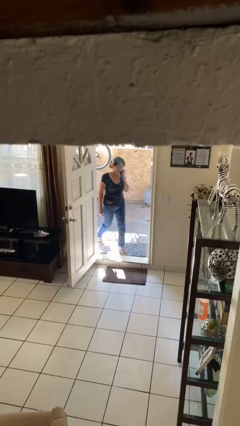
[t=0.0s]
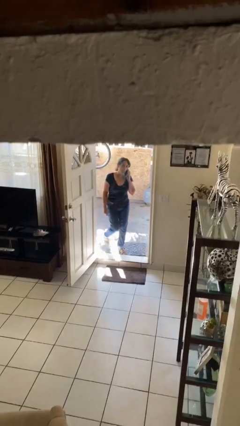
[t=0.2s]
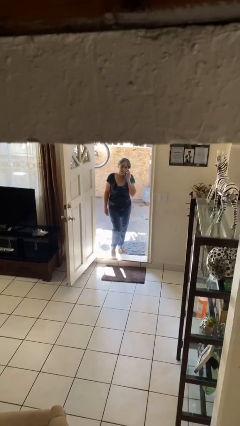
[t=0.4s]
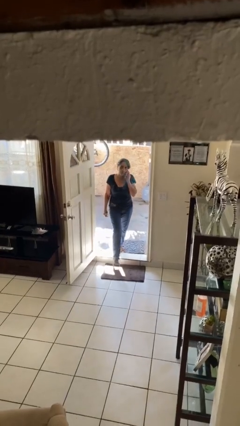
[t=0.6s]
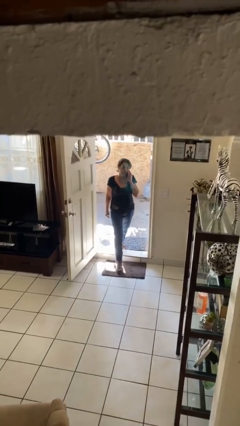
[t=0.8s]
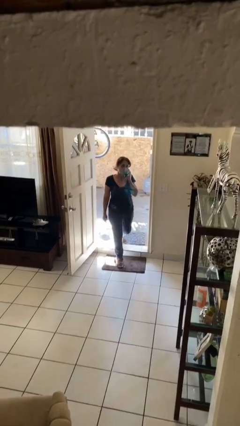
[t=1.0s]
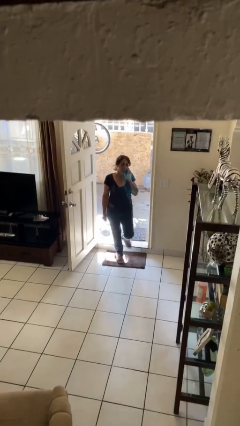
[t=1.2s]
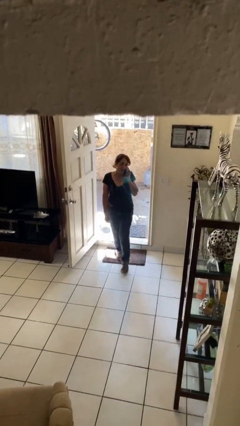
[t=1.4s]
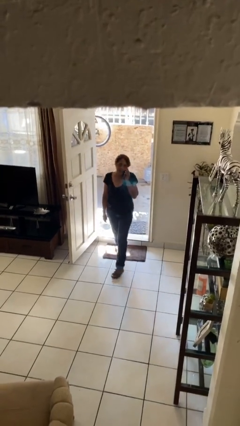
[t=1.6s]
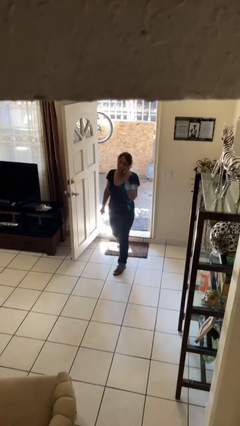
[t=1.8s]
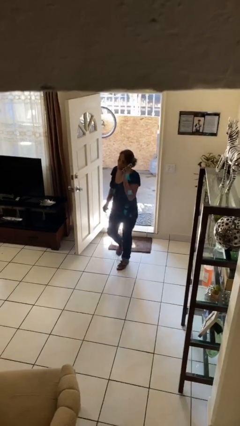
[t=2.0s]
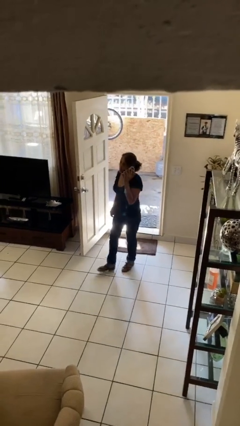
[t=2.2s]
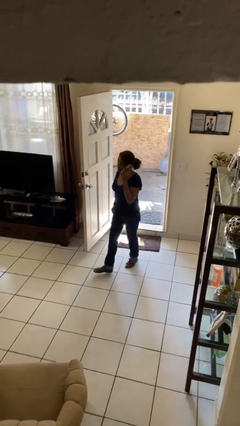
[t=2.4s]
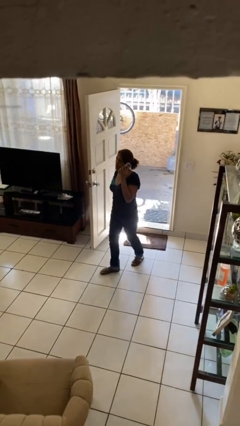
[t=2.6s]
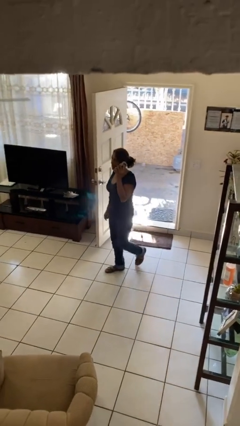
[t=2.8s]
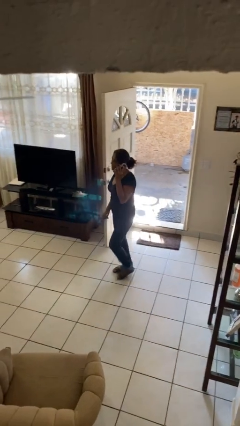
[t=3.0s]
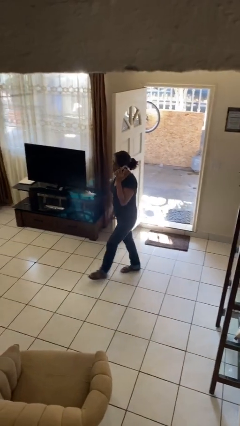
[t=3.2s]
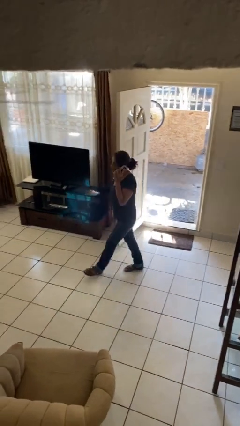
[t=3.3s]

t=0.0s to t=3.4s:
person enters scene through structure

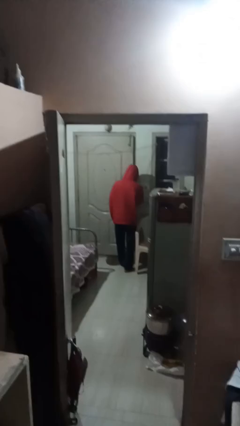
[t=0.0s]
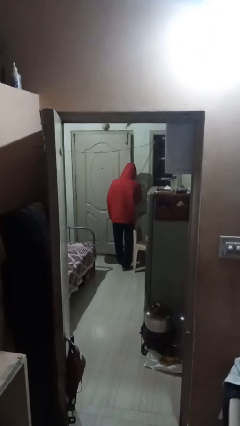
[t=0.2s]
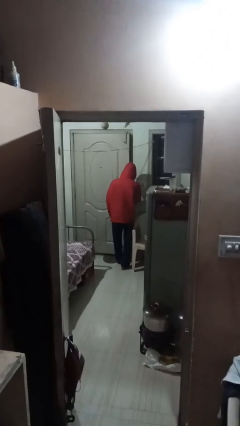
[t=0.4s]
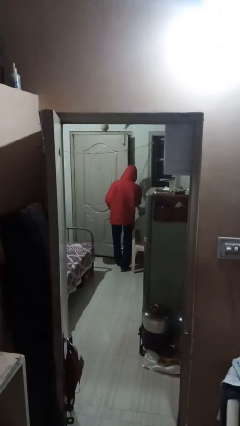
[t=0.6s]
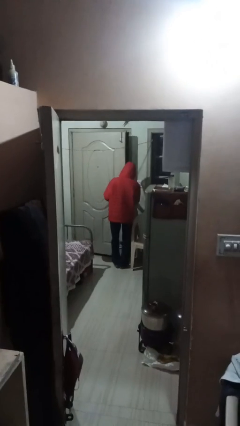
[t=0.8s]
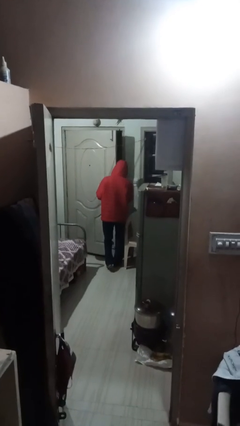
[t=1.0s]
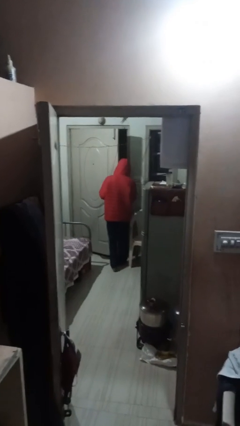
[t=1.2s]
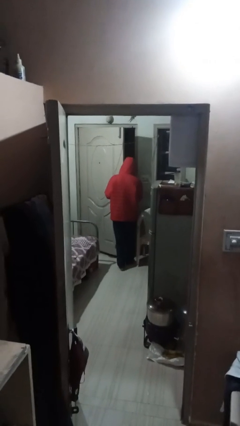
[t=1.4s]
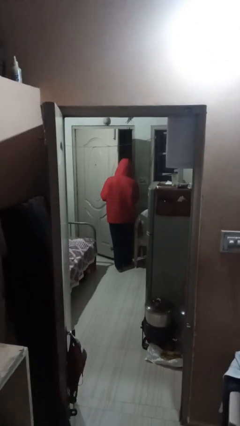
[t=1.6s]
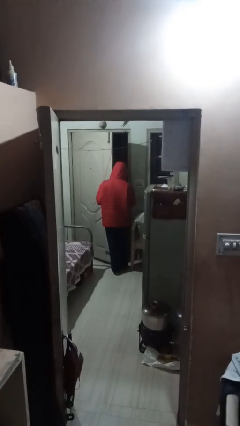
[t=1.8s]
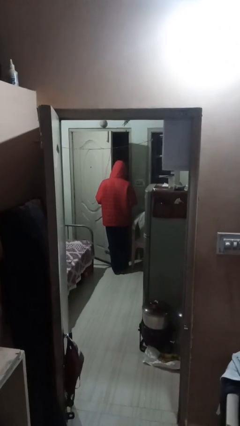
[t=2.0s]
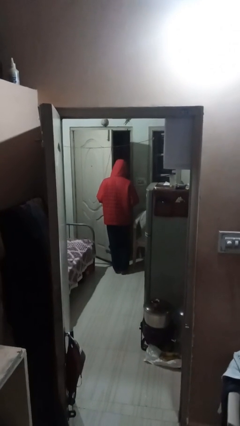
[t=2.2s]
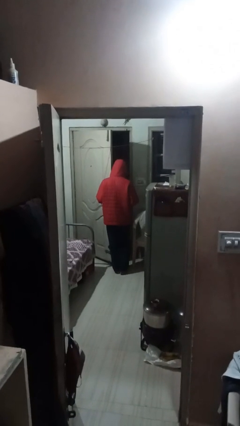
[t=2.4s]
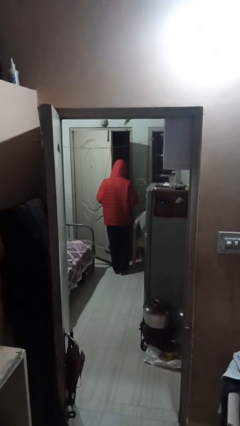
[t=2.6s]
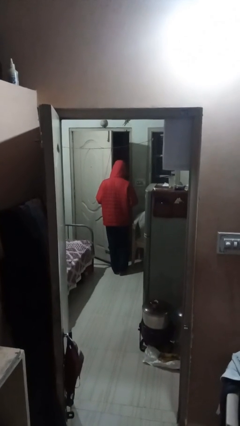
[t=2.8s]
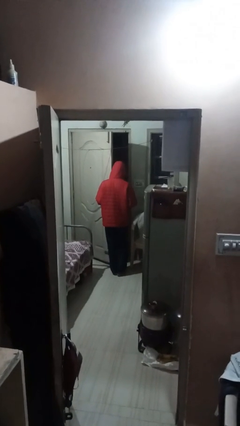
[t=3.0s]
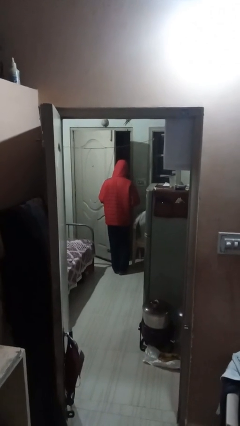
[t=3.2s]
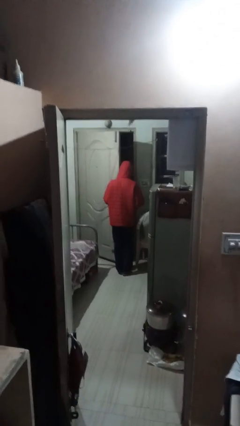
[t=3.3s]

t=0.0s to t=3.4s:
person opens facility door

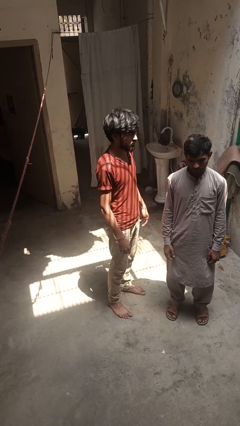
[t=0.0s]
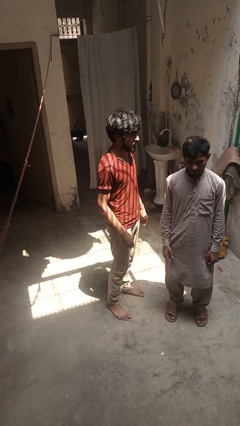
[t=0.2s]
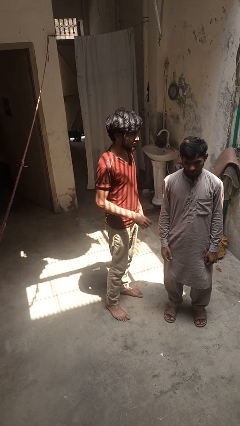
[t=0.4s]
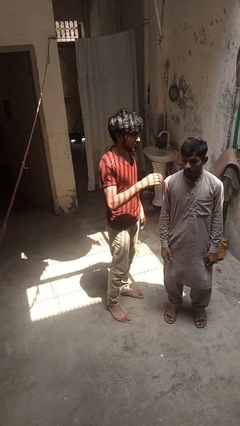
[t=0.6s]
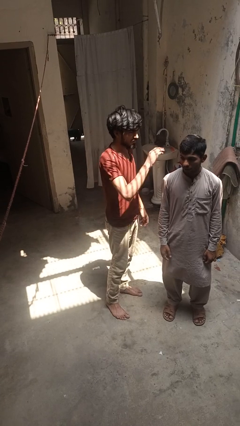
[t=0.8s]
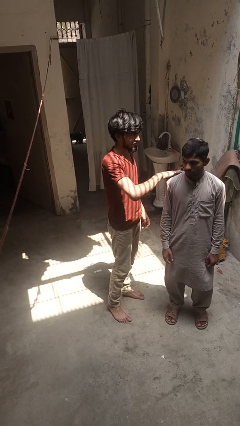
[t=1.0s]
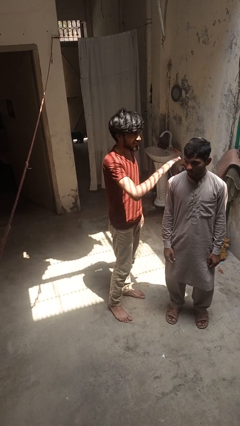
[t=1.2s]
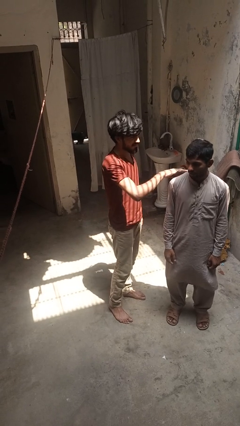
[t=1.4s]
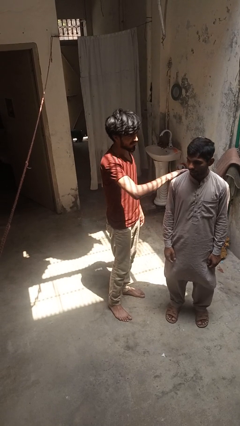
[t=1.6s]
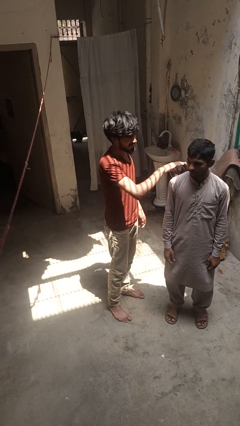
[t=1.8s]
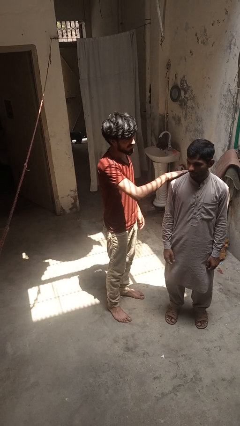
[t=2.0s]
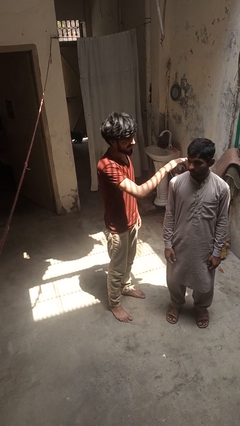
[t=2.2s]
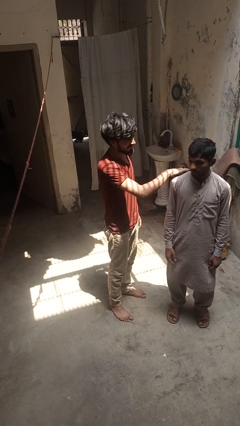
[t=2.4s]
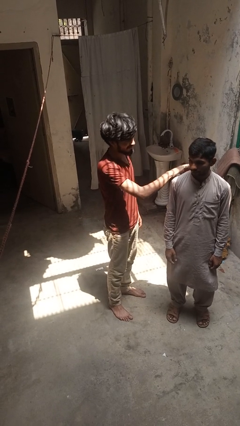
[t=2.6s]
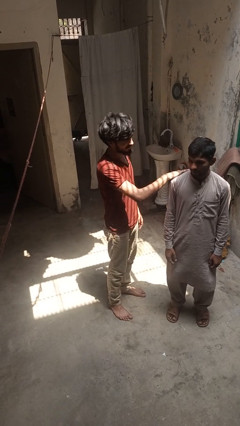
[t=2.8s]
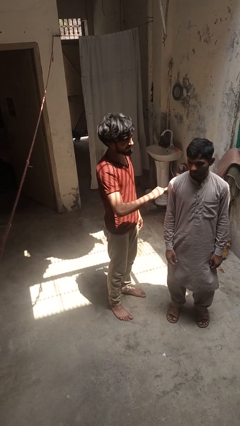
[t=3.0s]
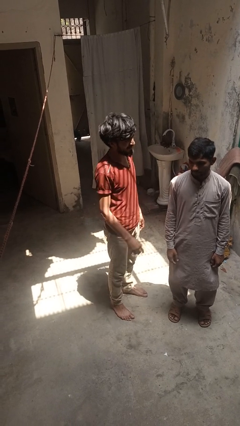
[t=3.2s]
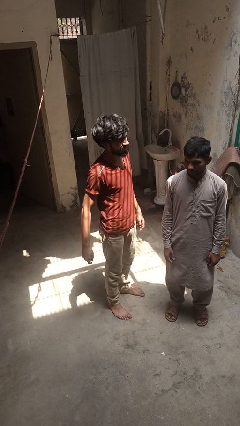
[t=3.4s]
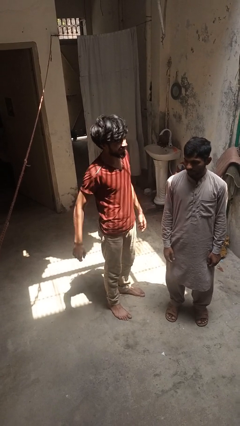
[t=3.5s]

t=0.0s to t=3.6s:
person pounds shoulders of person

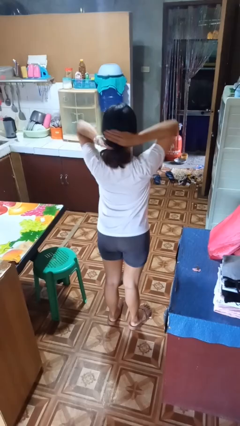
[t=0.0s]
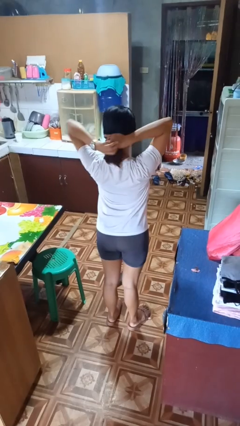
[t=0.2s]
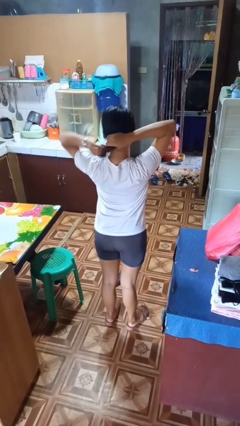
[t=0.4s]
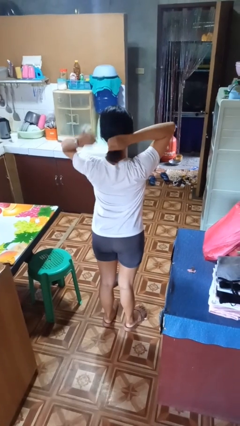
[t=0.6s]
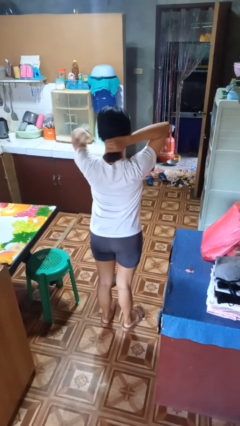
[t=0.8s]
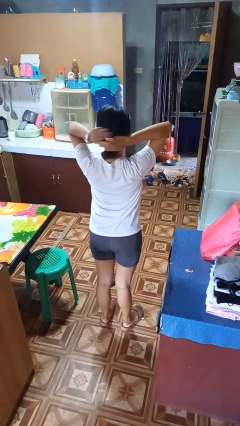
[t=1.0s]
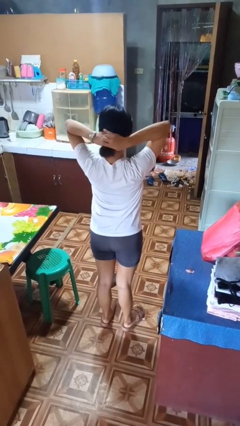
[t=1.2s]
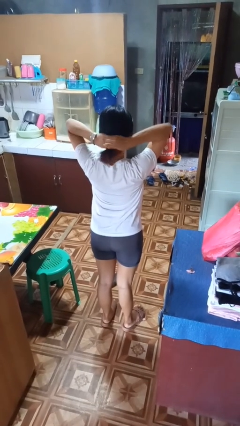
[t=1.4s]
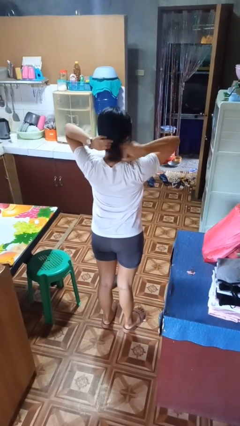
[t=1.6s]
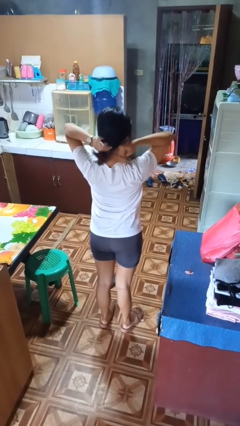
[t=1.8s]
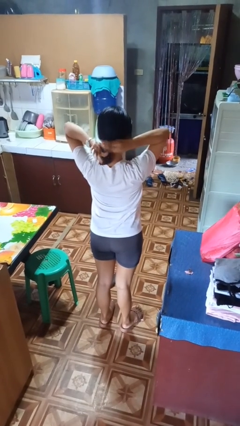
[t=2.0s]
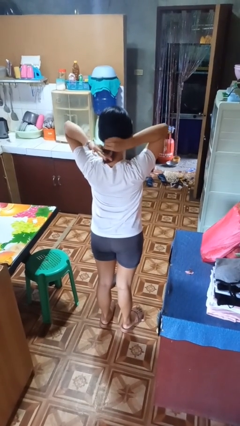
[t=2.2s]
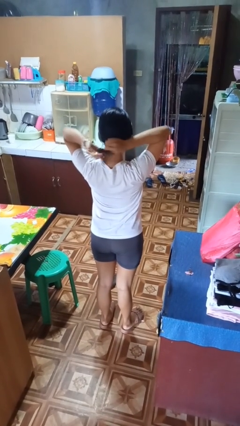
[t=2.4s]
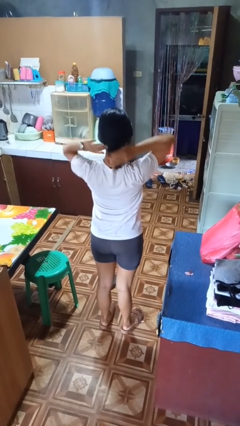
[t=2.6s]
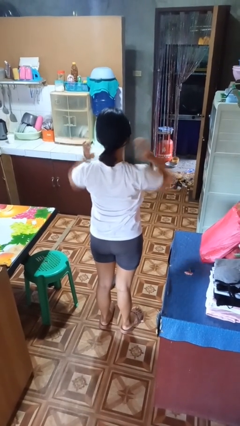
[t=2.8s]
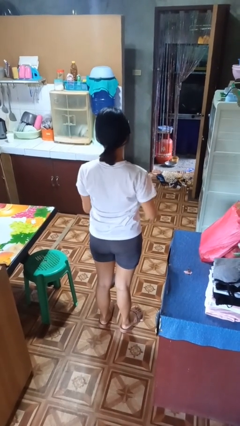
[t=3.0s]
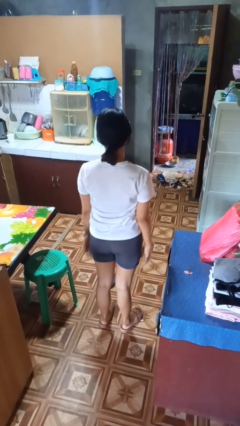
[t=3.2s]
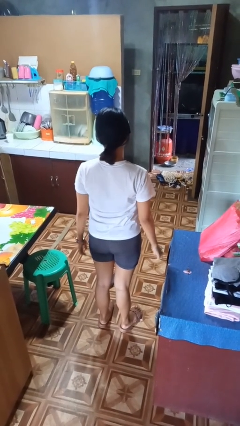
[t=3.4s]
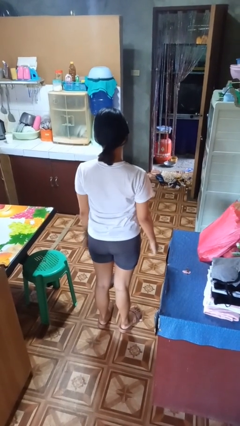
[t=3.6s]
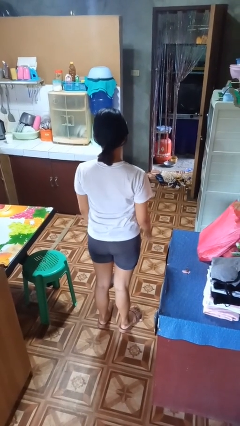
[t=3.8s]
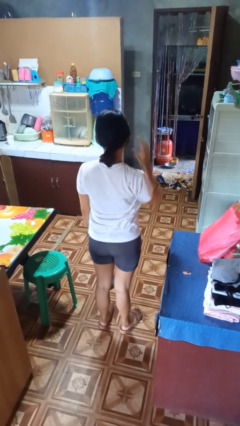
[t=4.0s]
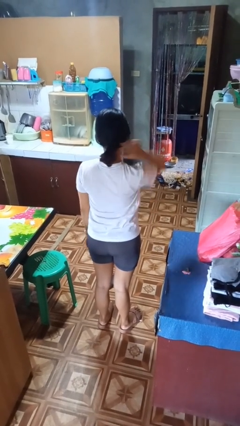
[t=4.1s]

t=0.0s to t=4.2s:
person puts hair in ponytail

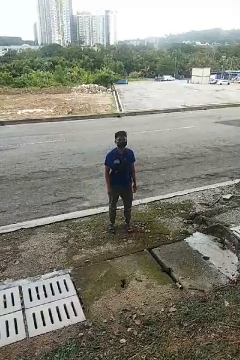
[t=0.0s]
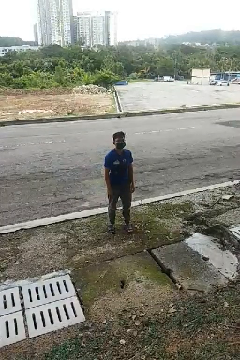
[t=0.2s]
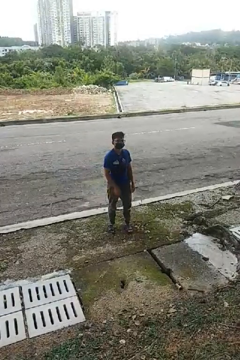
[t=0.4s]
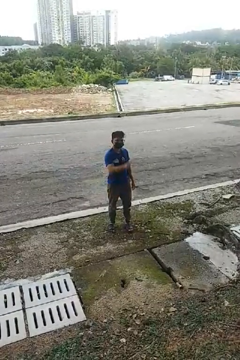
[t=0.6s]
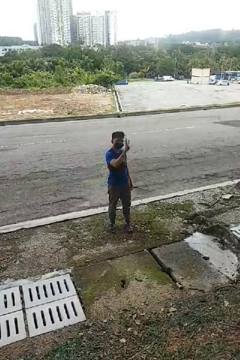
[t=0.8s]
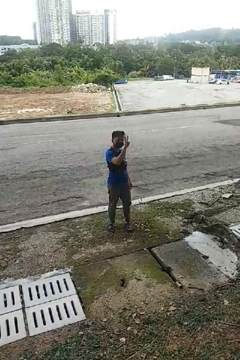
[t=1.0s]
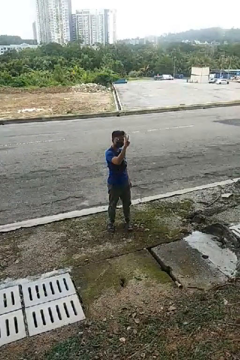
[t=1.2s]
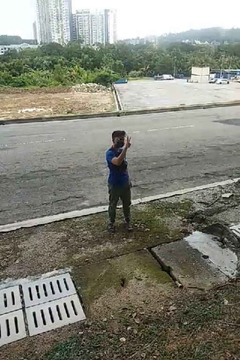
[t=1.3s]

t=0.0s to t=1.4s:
person gestures number three

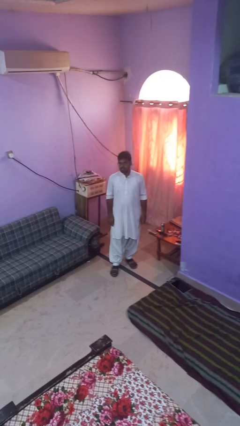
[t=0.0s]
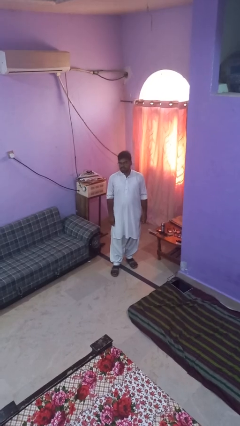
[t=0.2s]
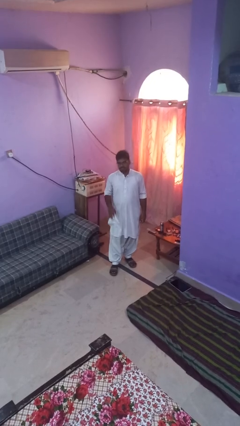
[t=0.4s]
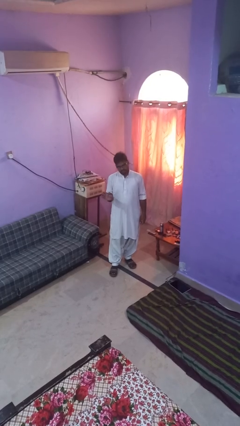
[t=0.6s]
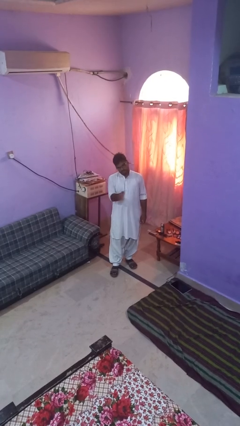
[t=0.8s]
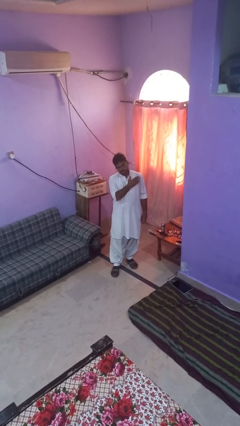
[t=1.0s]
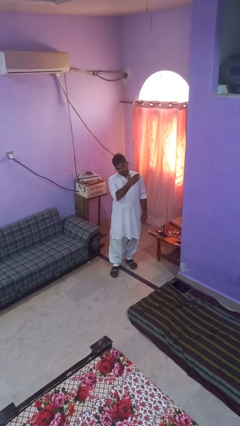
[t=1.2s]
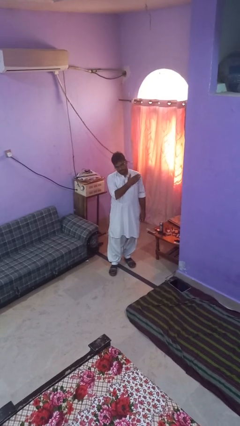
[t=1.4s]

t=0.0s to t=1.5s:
person gestures swipe left
